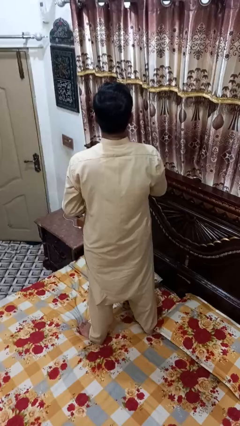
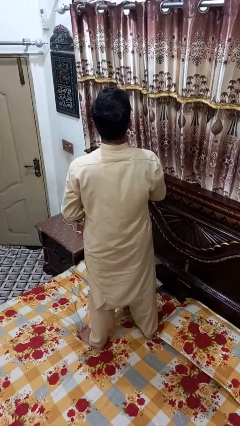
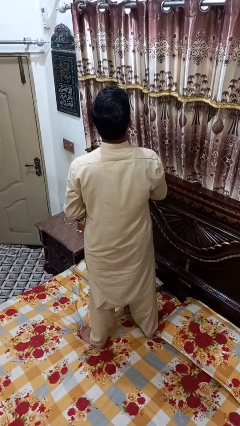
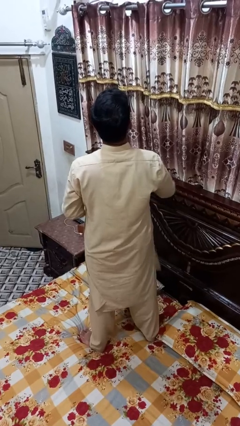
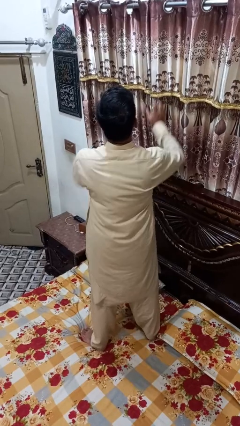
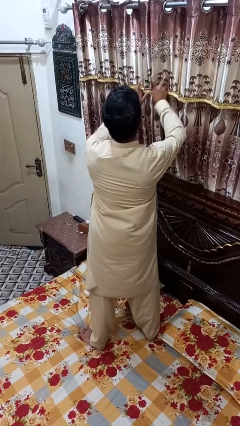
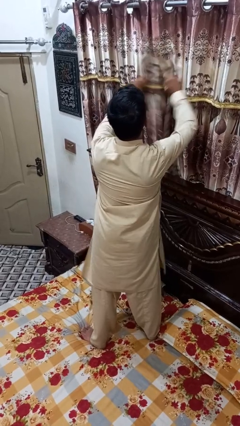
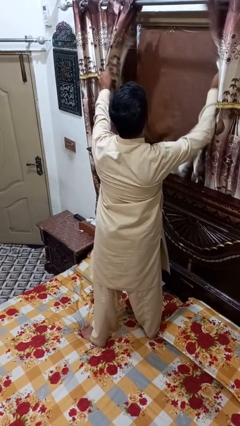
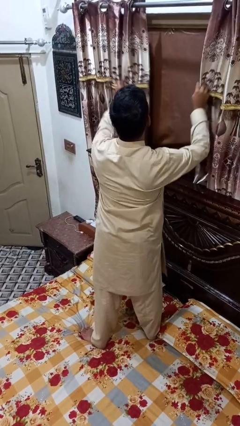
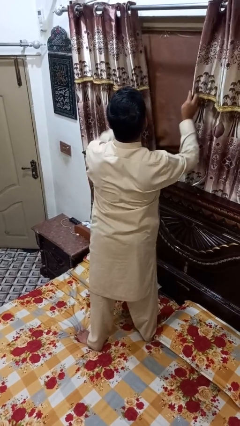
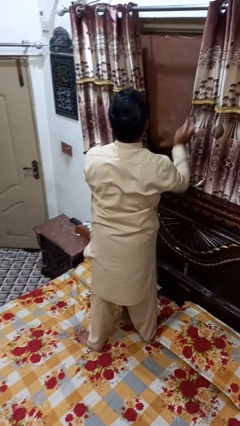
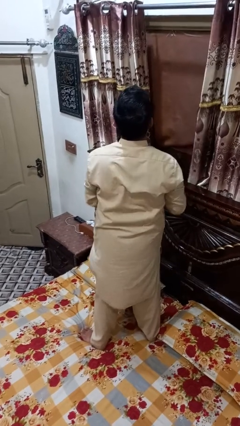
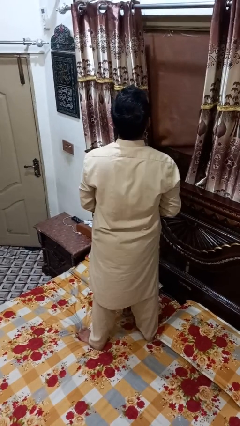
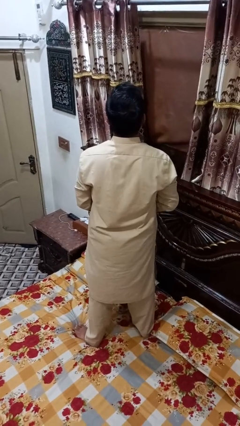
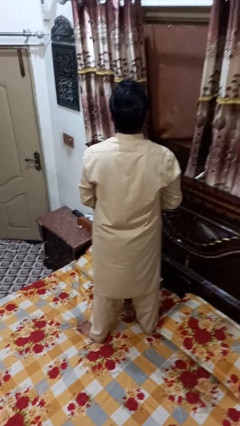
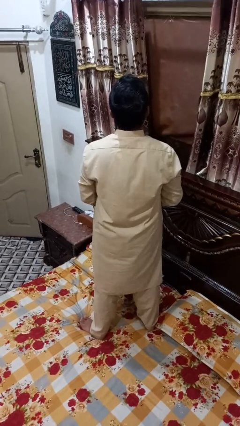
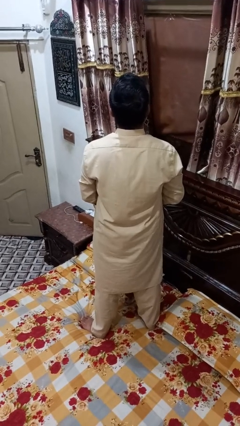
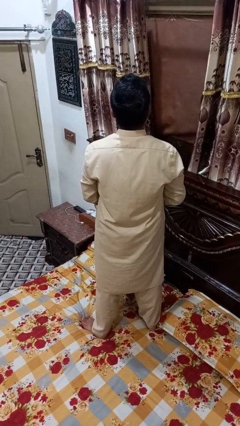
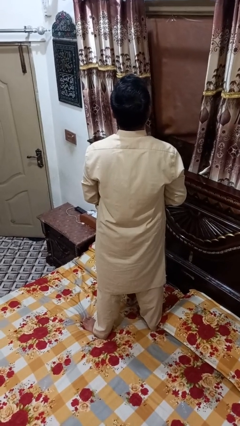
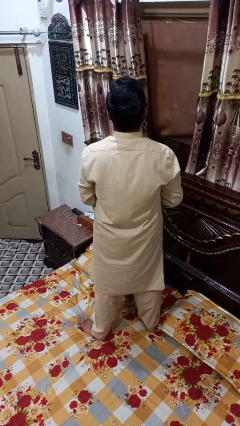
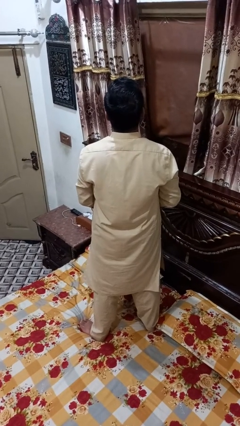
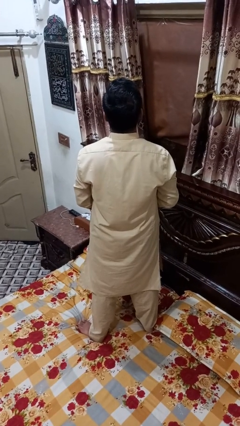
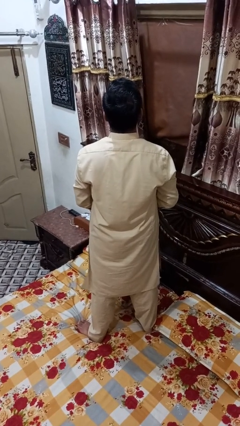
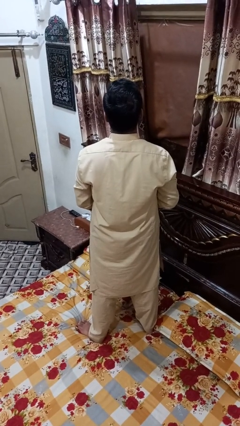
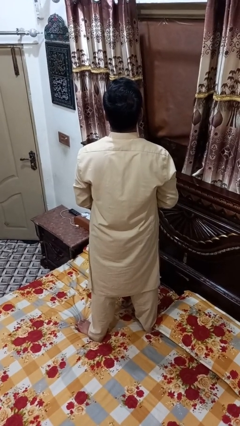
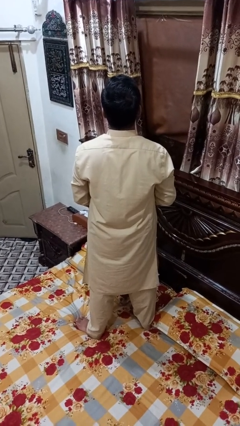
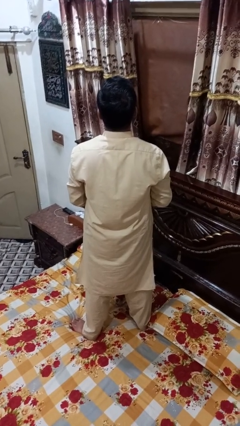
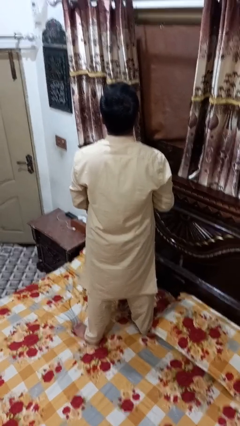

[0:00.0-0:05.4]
person opens curtains

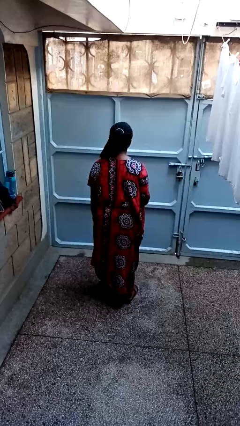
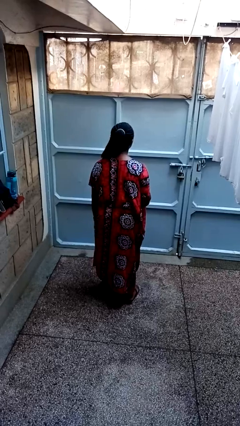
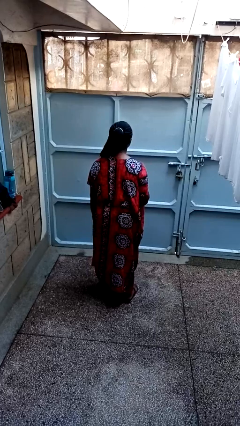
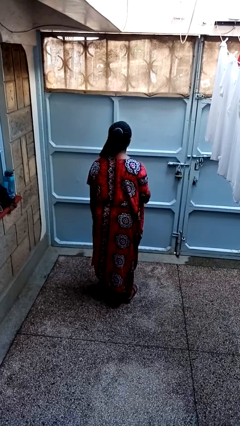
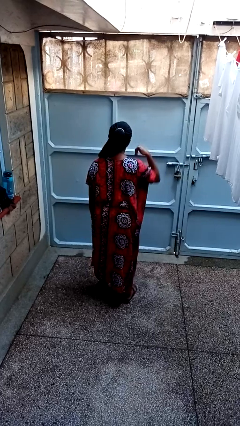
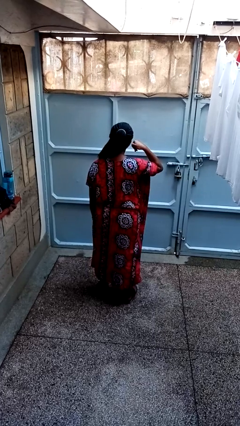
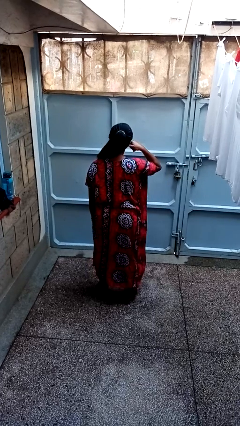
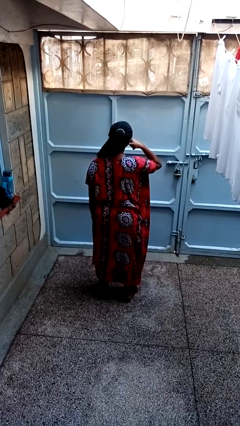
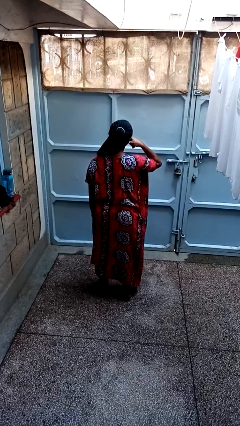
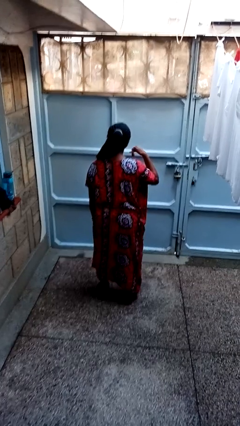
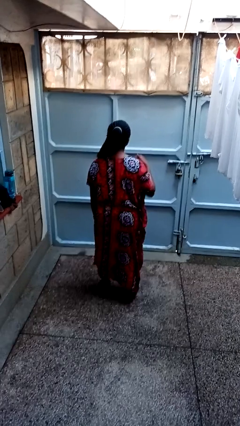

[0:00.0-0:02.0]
person gestures call me

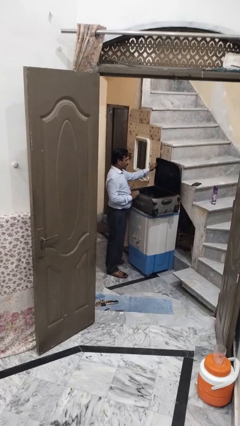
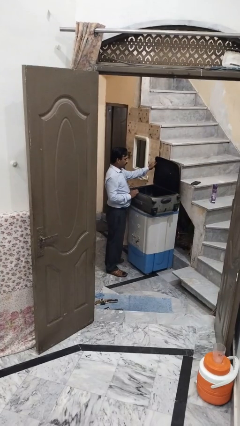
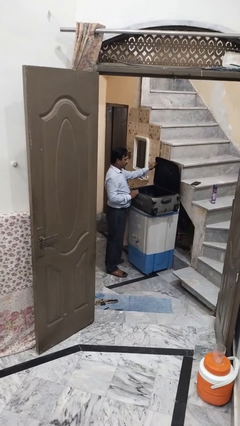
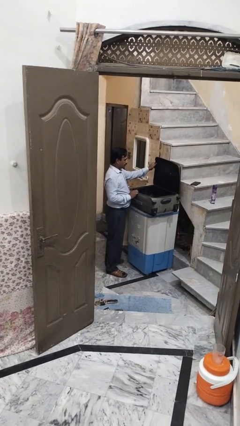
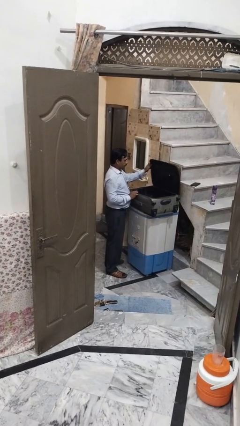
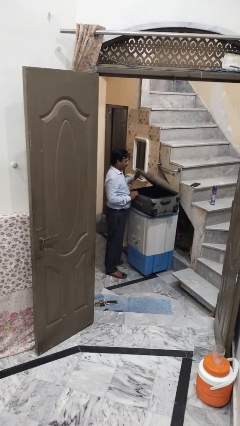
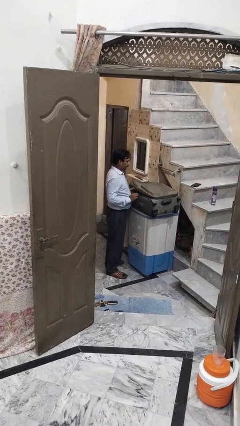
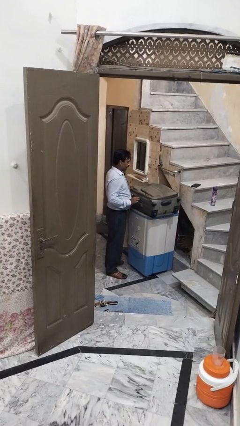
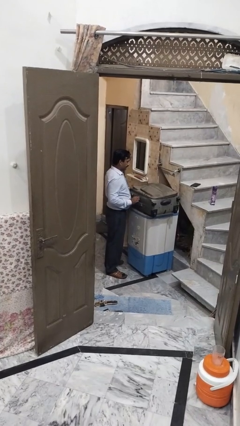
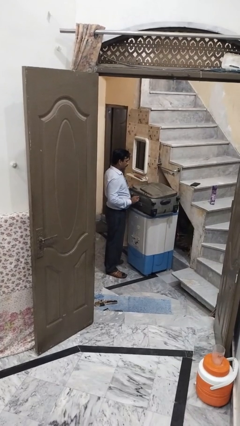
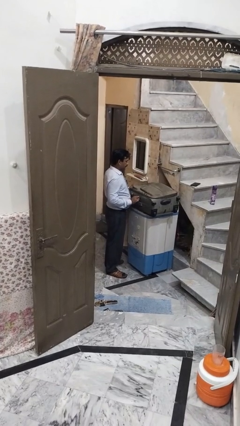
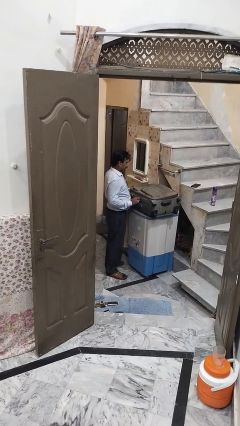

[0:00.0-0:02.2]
person closes suitcase

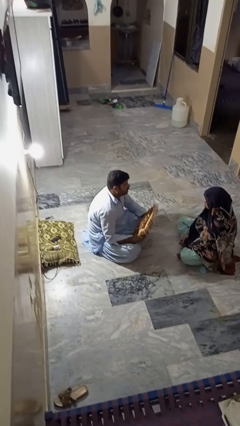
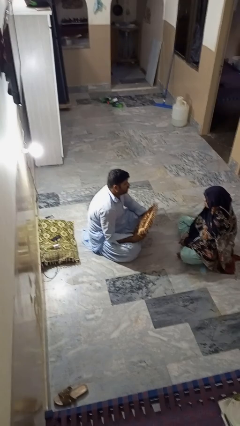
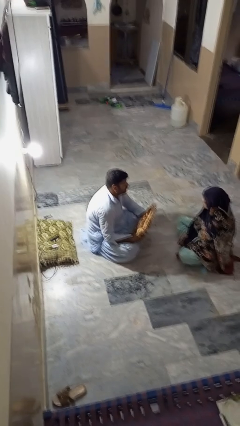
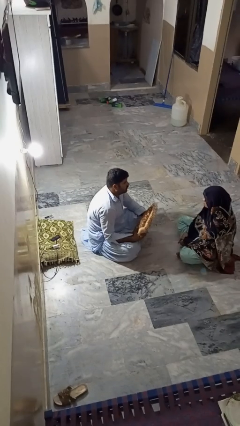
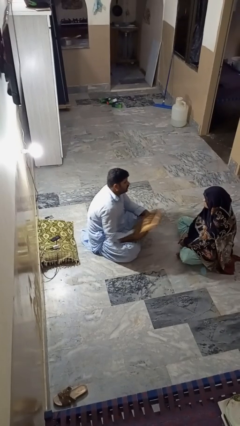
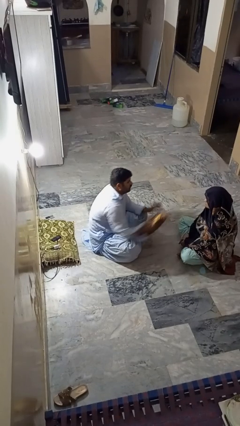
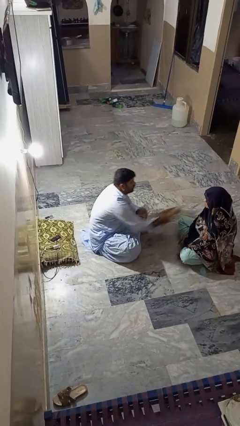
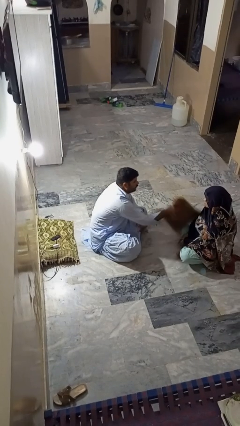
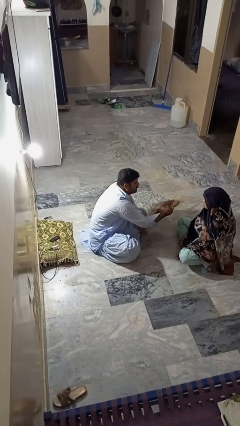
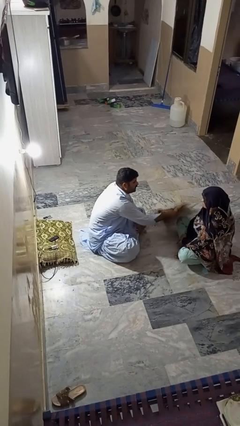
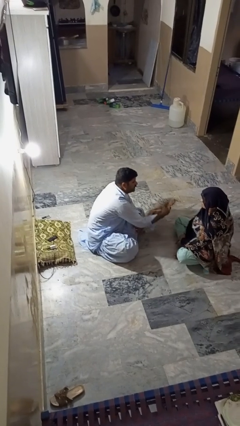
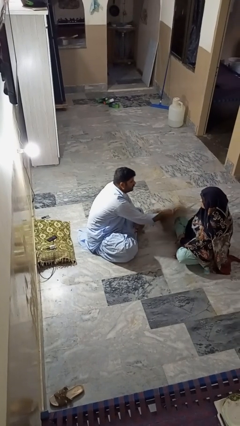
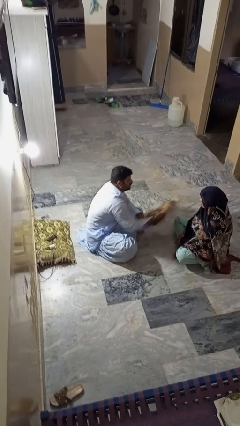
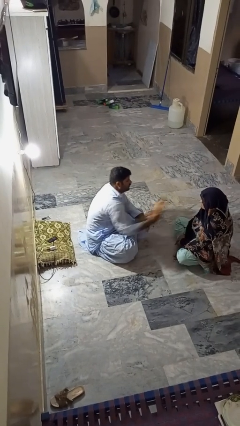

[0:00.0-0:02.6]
person hits person with pillow

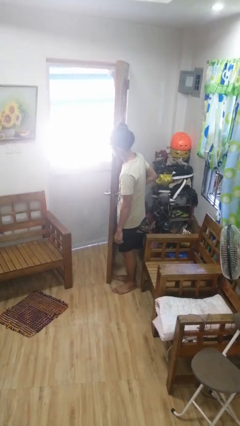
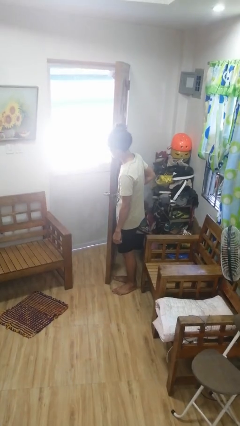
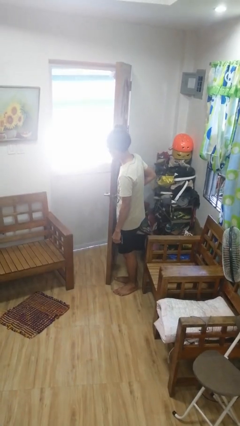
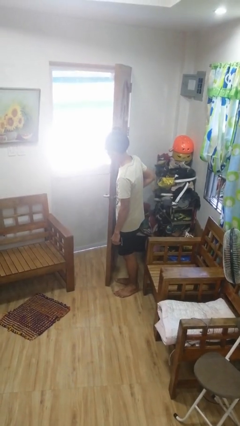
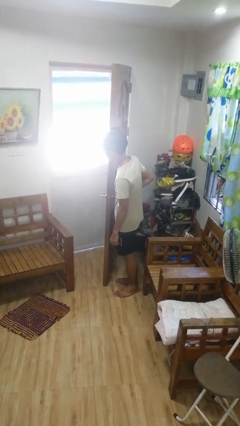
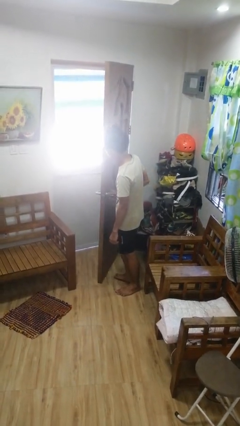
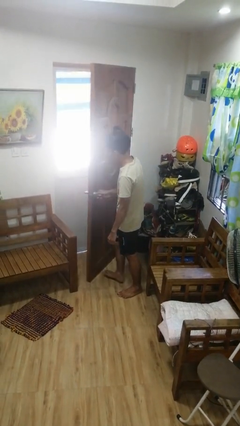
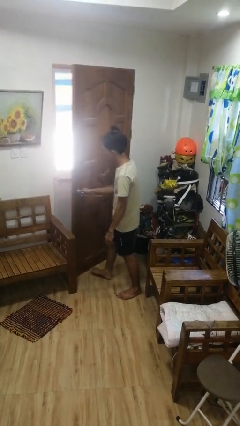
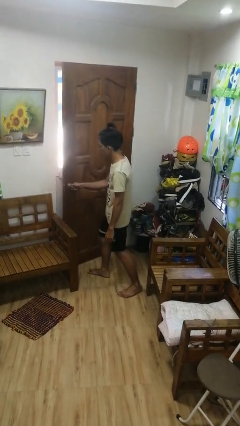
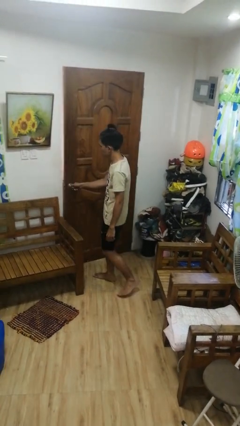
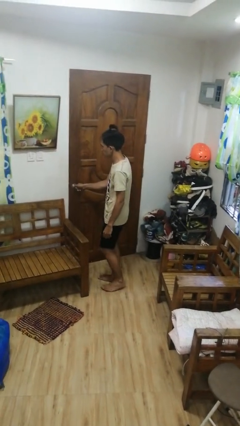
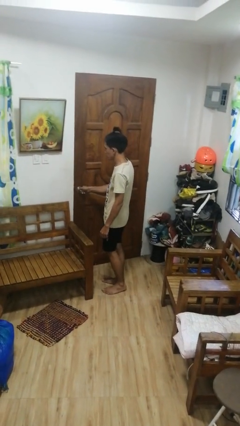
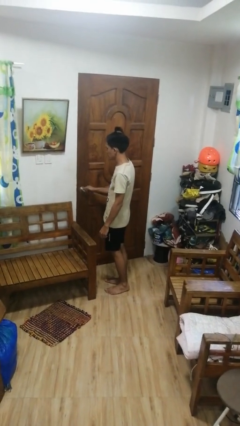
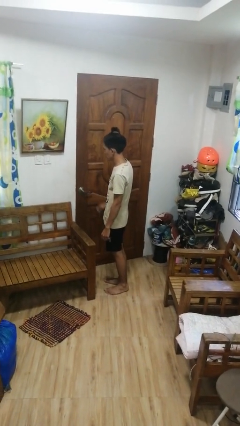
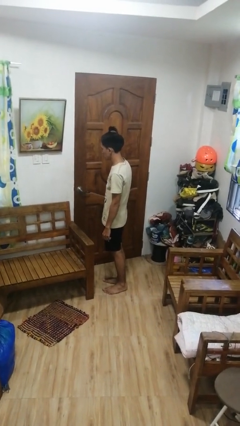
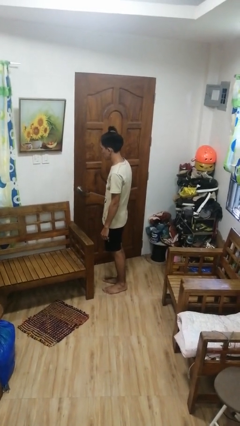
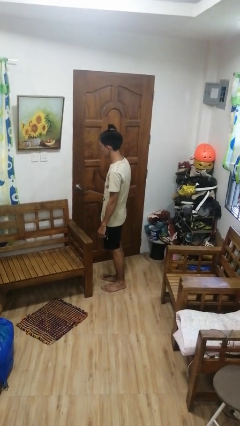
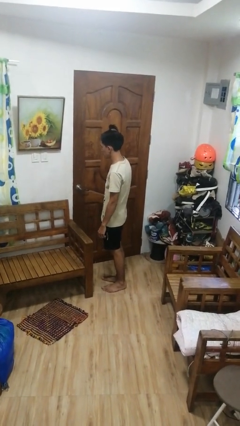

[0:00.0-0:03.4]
person closes facility door

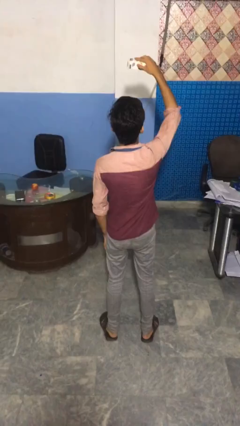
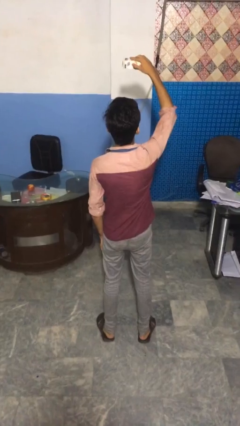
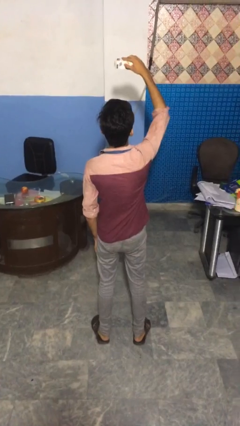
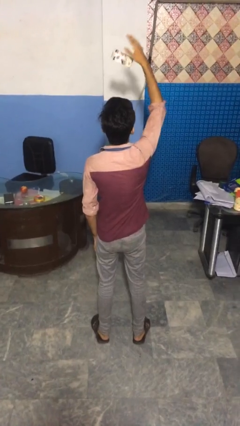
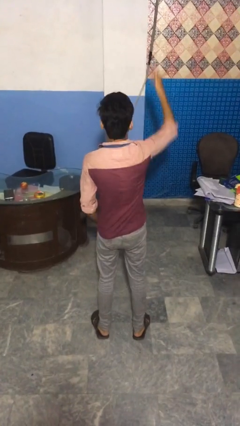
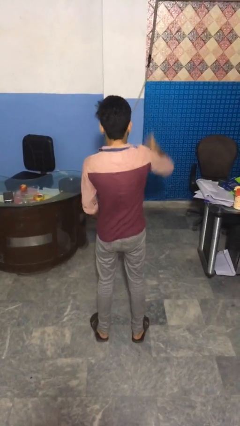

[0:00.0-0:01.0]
person drops object

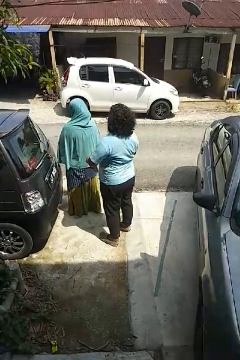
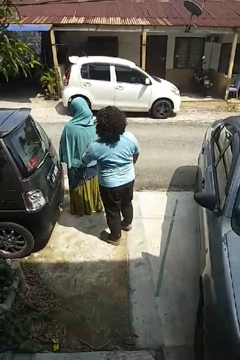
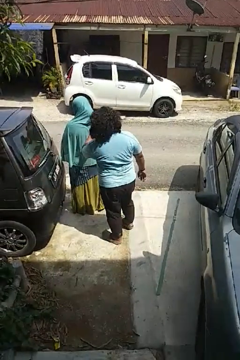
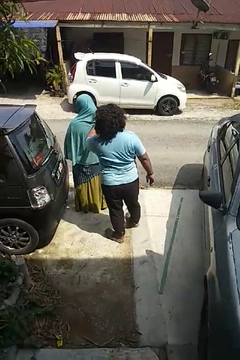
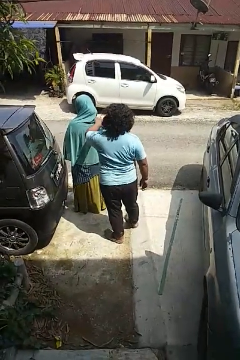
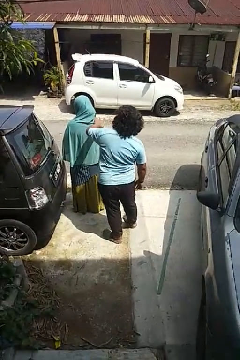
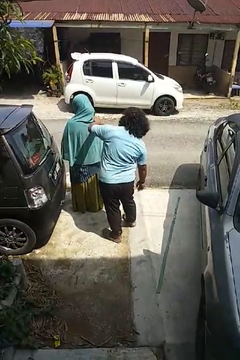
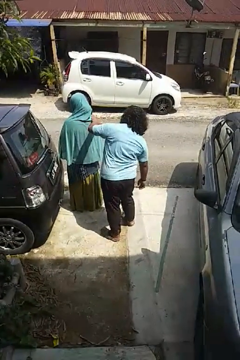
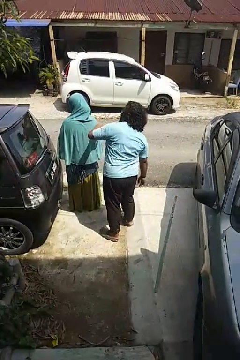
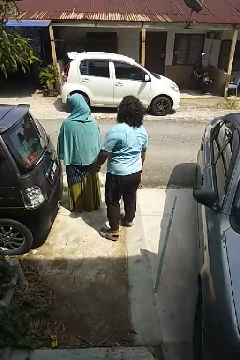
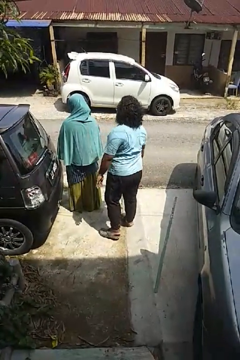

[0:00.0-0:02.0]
person touches back of person
